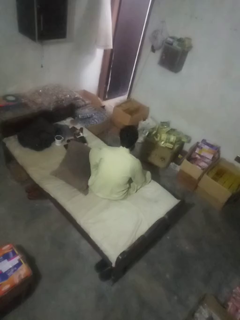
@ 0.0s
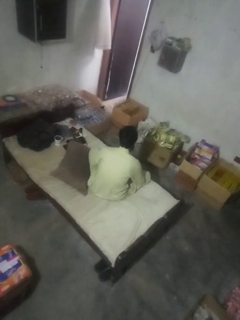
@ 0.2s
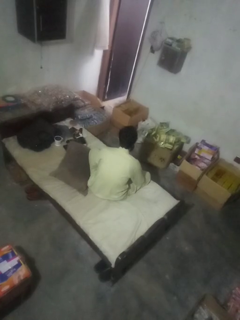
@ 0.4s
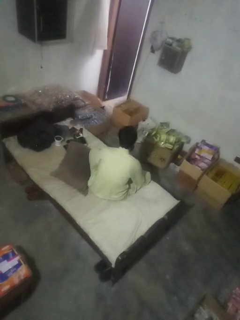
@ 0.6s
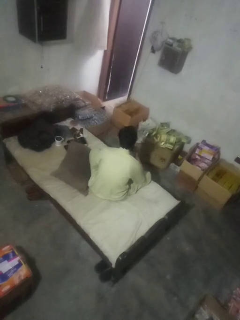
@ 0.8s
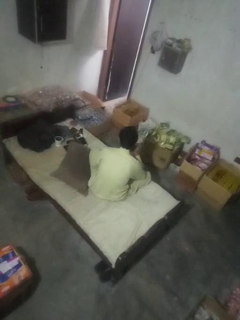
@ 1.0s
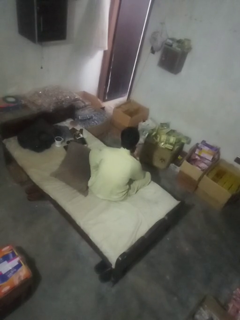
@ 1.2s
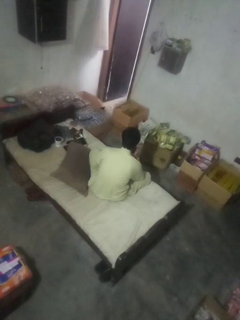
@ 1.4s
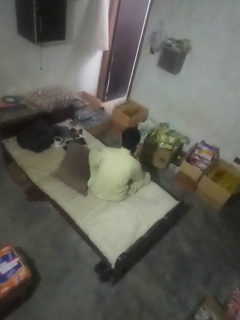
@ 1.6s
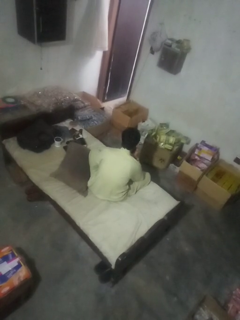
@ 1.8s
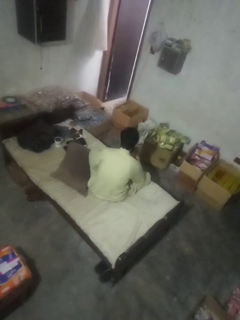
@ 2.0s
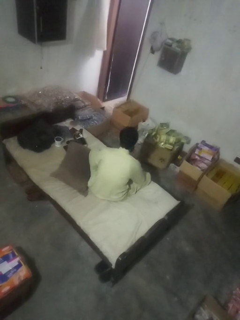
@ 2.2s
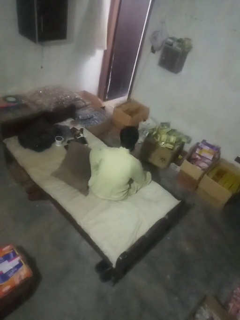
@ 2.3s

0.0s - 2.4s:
person strokes chin

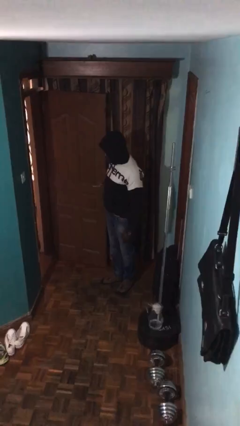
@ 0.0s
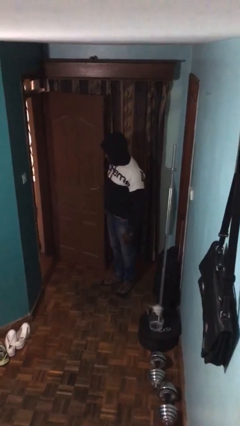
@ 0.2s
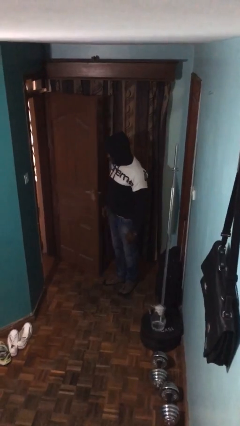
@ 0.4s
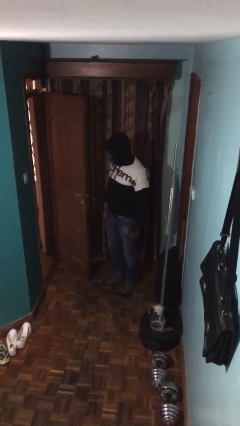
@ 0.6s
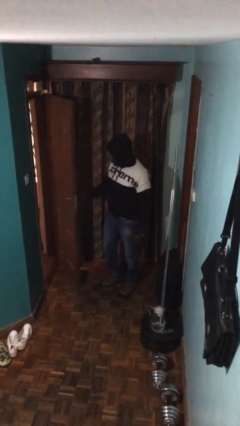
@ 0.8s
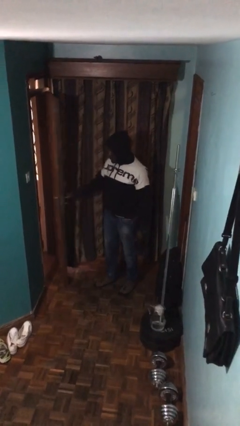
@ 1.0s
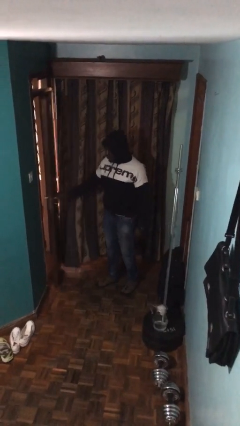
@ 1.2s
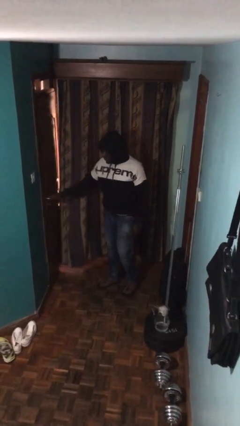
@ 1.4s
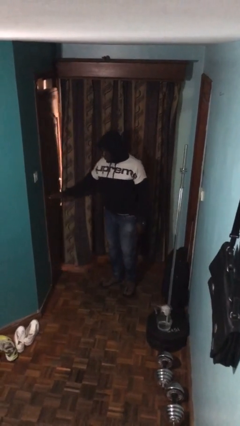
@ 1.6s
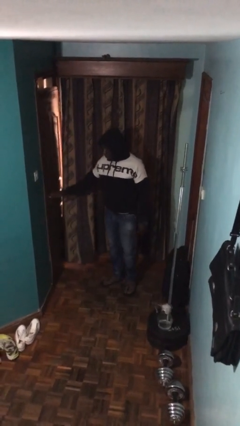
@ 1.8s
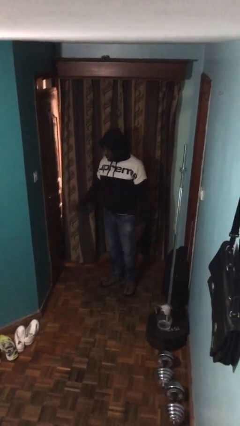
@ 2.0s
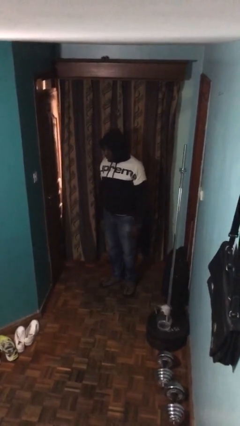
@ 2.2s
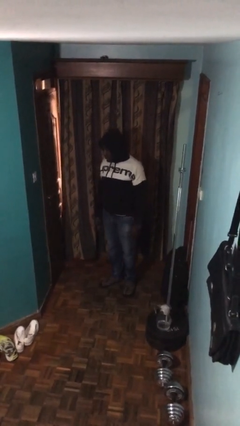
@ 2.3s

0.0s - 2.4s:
person closes facility door

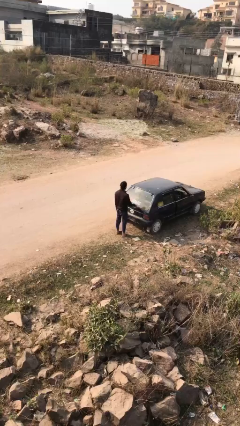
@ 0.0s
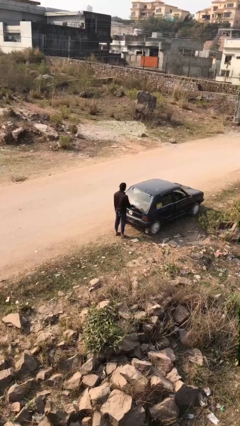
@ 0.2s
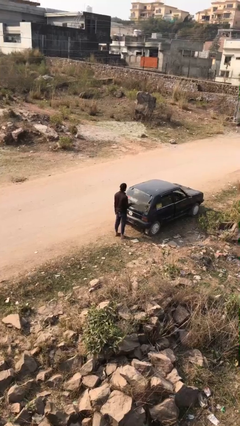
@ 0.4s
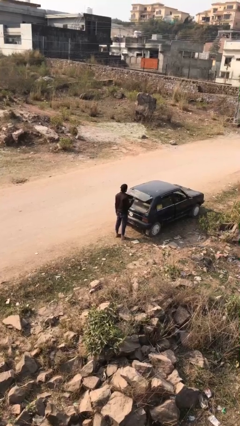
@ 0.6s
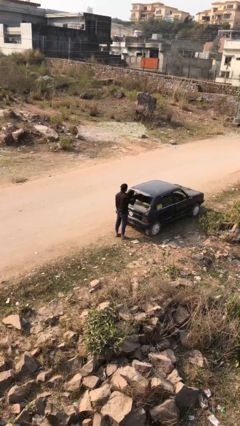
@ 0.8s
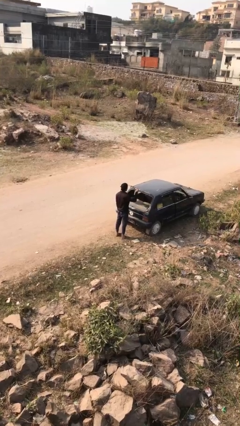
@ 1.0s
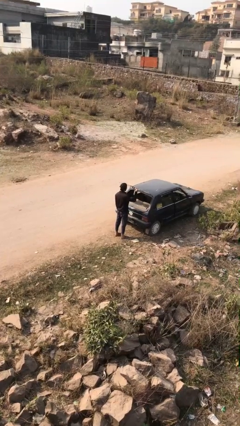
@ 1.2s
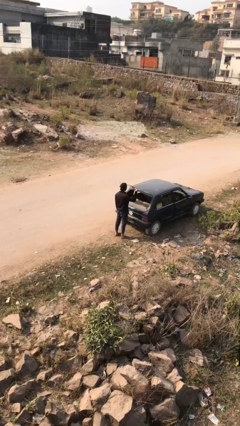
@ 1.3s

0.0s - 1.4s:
person opens car trunk

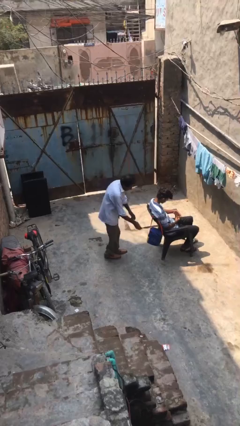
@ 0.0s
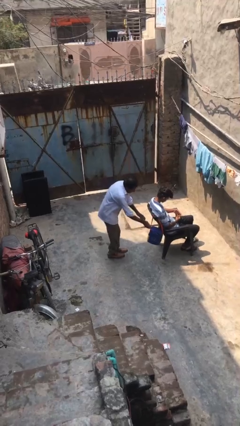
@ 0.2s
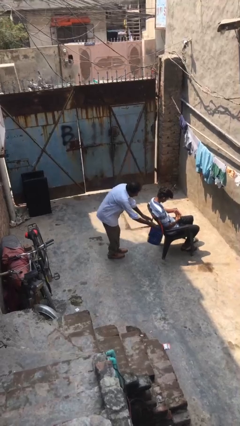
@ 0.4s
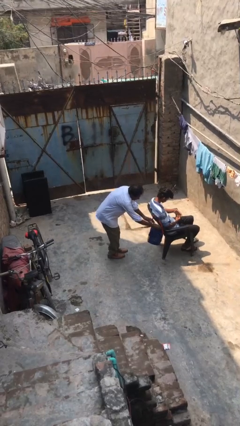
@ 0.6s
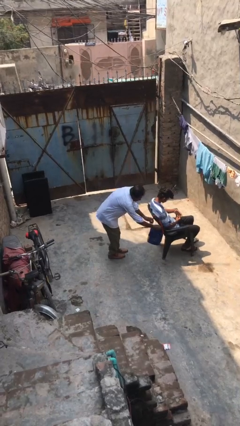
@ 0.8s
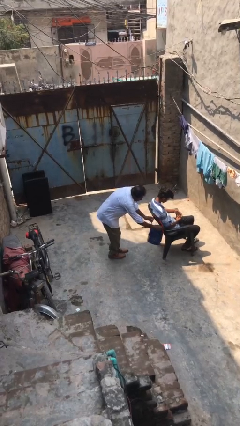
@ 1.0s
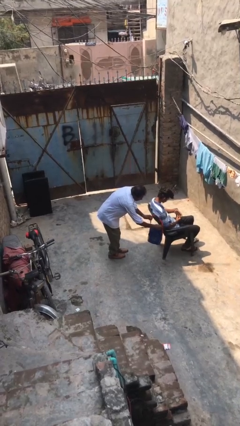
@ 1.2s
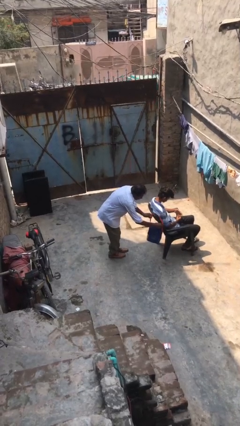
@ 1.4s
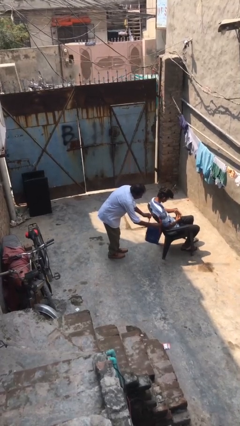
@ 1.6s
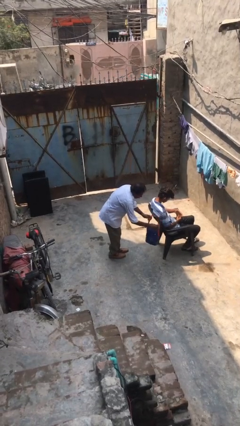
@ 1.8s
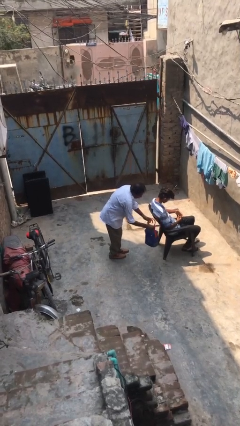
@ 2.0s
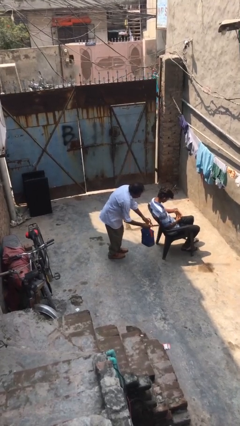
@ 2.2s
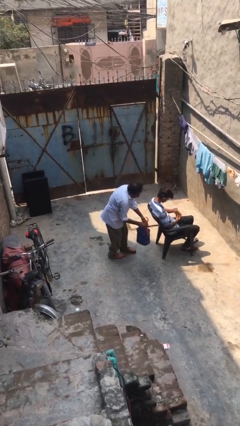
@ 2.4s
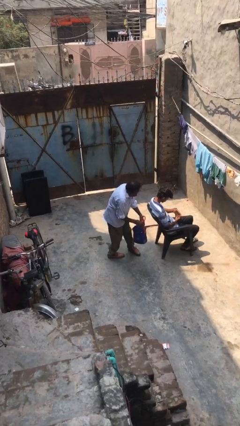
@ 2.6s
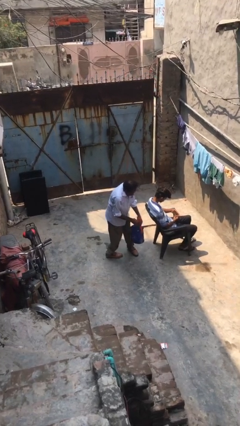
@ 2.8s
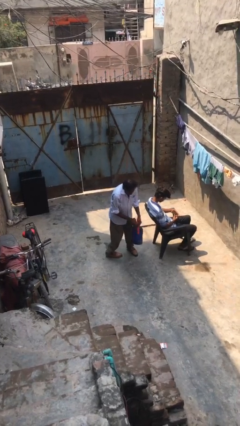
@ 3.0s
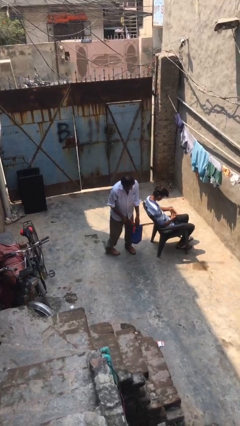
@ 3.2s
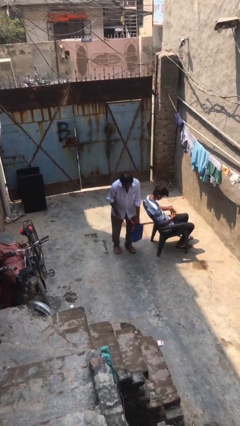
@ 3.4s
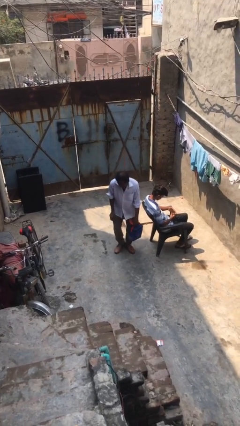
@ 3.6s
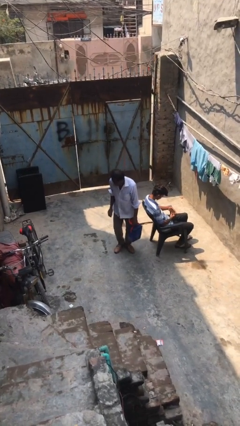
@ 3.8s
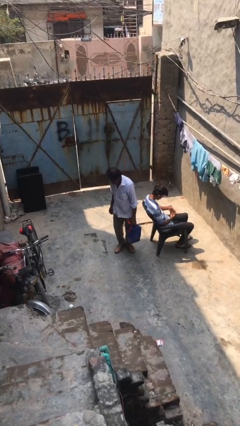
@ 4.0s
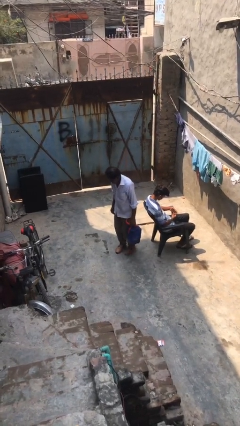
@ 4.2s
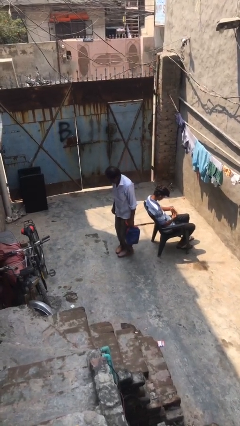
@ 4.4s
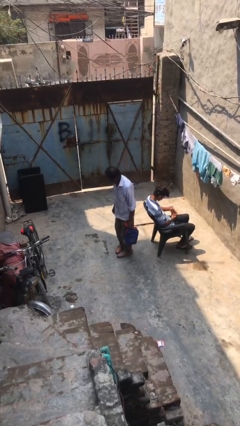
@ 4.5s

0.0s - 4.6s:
person steals object from person

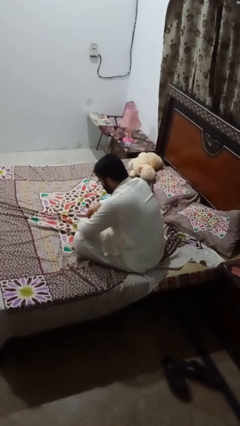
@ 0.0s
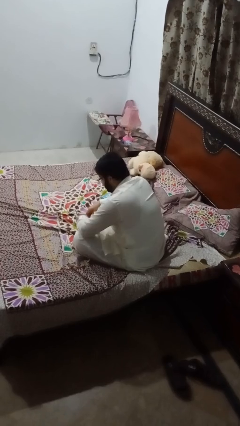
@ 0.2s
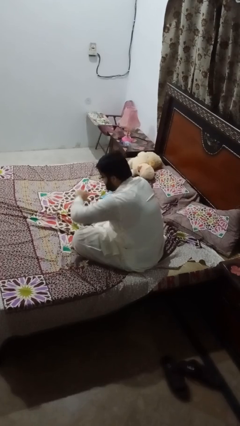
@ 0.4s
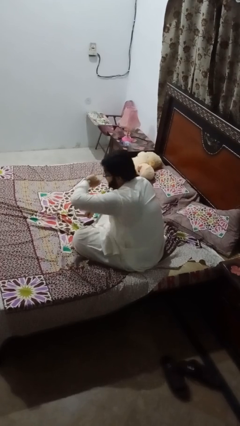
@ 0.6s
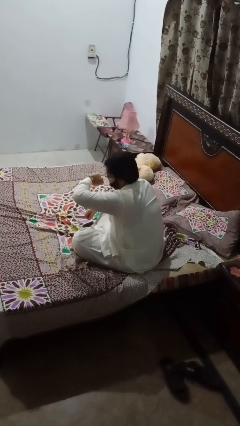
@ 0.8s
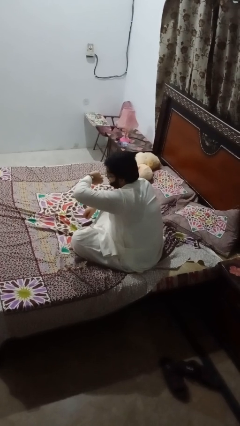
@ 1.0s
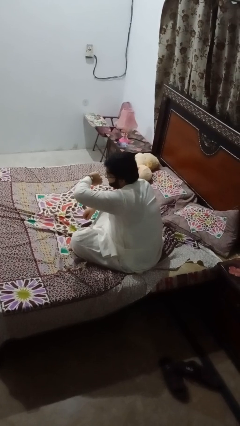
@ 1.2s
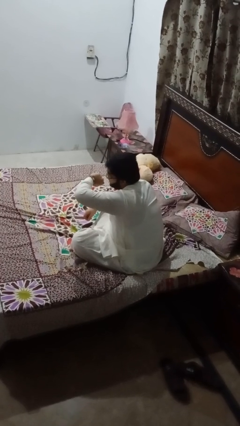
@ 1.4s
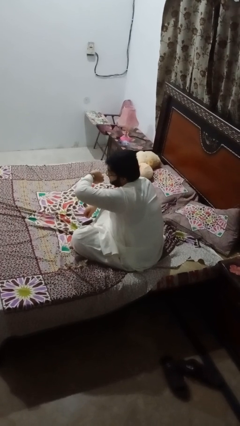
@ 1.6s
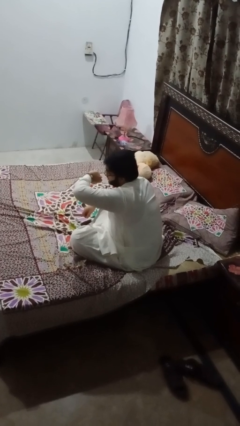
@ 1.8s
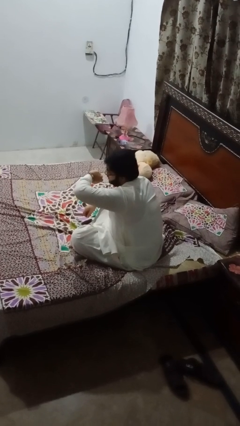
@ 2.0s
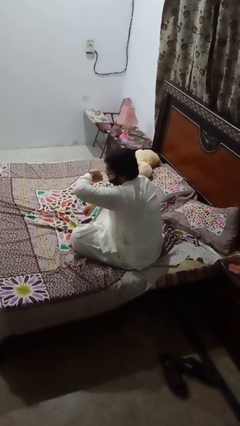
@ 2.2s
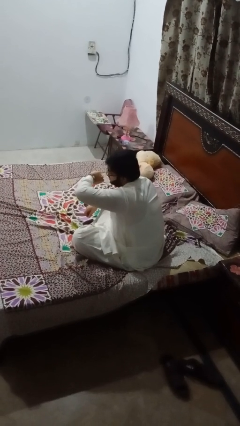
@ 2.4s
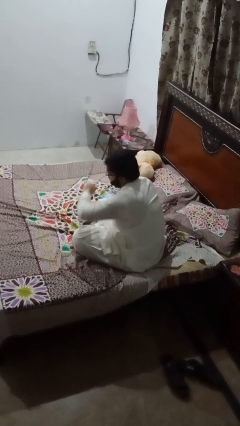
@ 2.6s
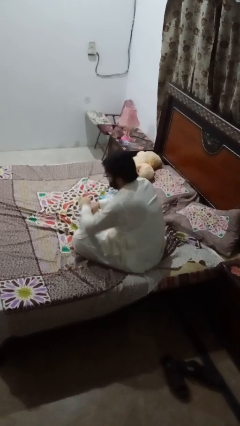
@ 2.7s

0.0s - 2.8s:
person looks at wristwatch

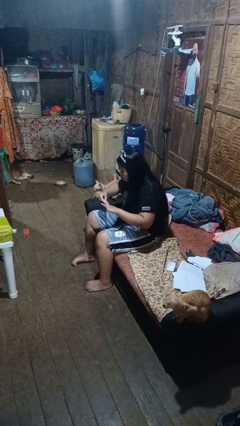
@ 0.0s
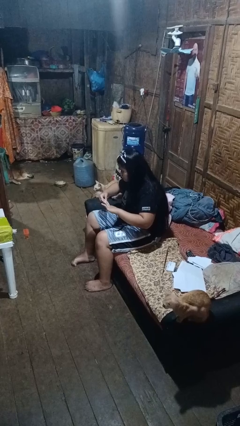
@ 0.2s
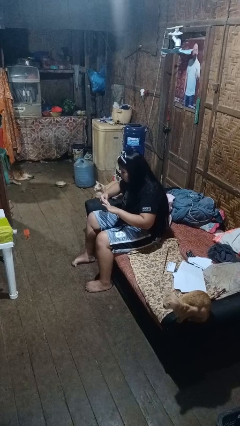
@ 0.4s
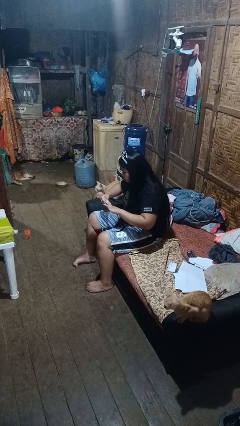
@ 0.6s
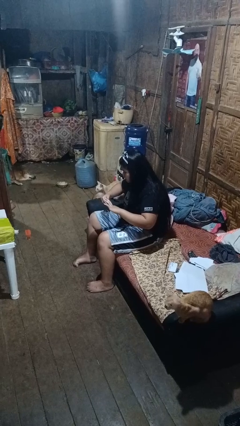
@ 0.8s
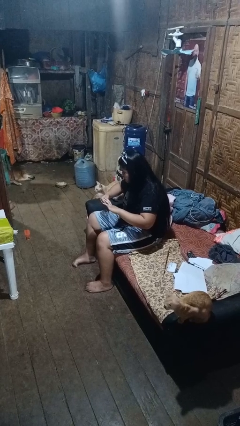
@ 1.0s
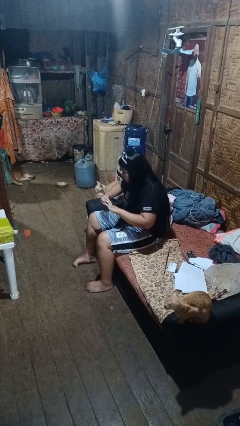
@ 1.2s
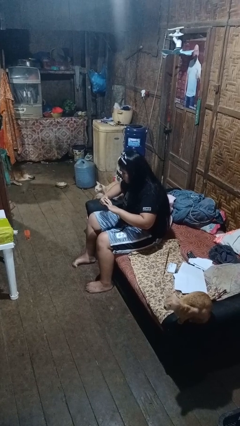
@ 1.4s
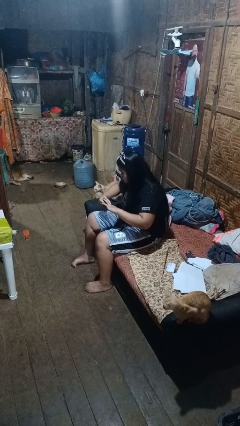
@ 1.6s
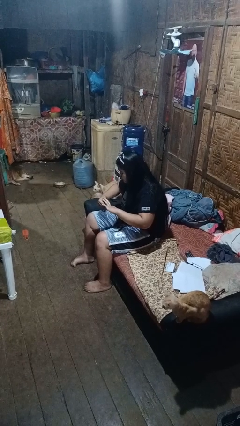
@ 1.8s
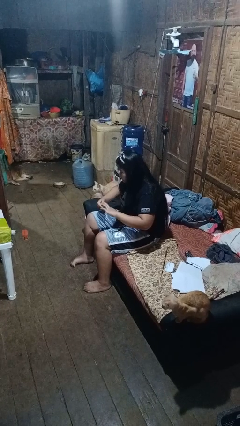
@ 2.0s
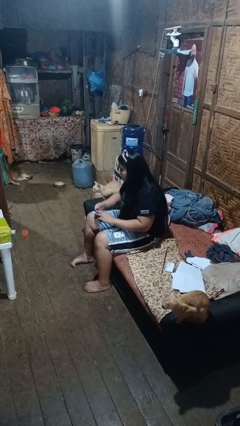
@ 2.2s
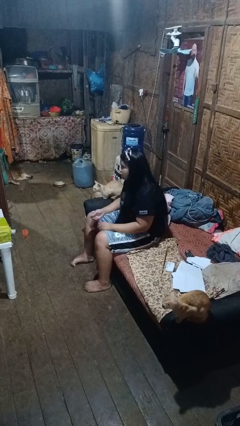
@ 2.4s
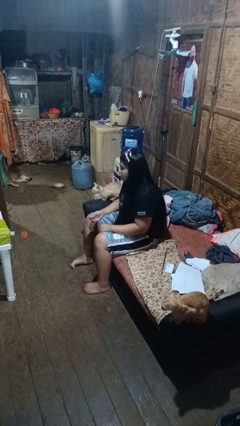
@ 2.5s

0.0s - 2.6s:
person clips fingernails

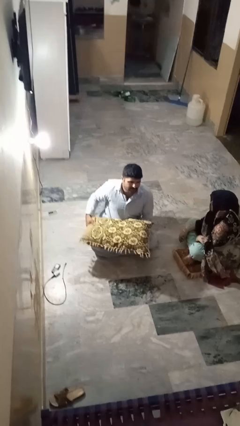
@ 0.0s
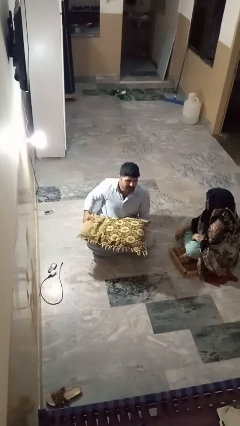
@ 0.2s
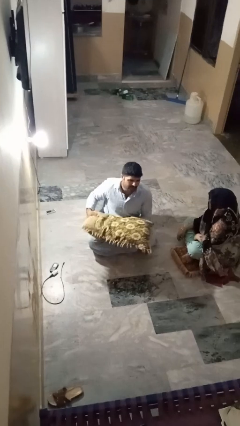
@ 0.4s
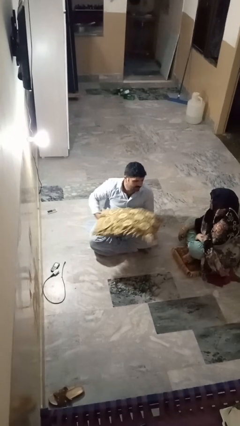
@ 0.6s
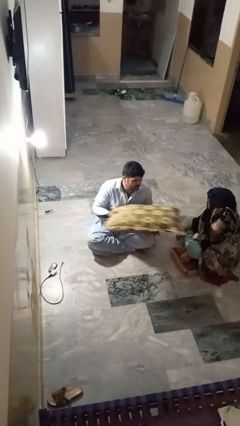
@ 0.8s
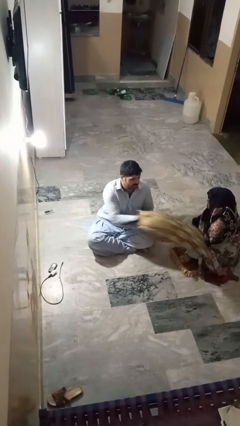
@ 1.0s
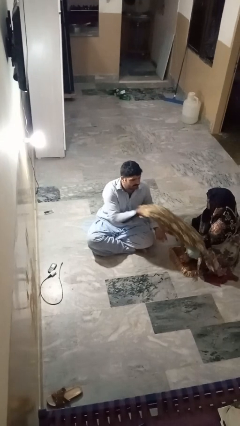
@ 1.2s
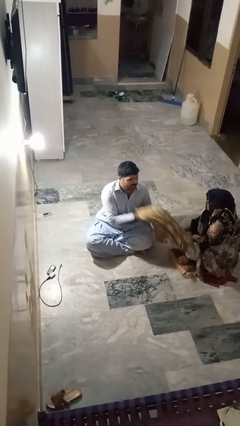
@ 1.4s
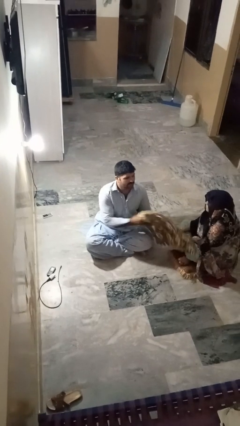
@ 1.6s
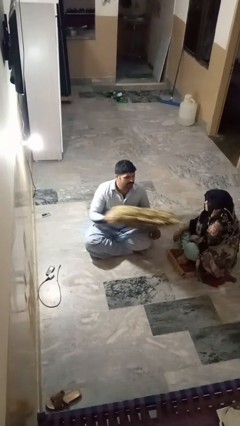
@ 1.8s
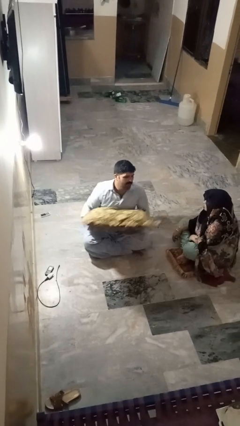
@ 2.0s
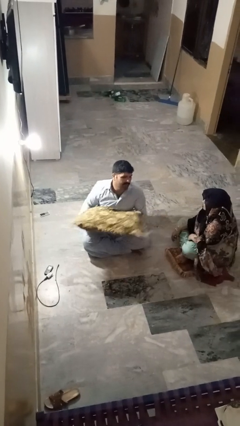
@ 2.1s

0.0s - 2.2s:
person hits person with pillow
